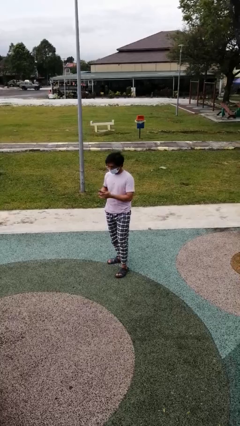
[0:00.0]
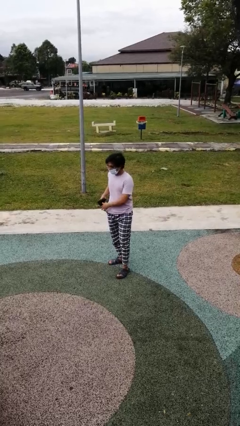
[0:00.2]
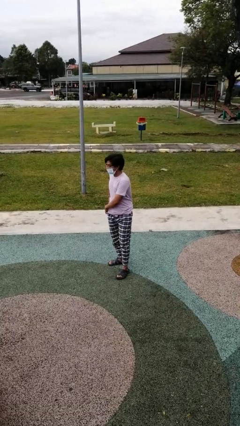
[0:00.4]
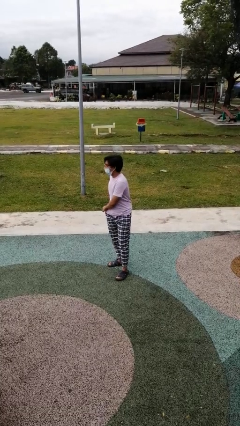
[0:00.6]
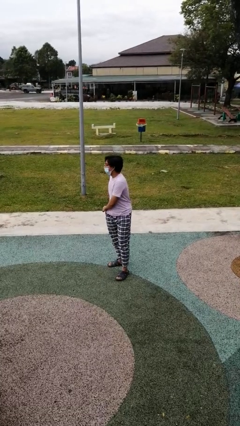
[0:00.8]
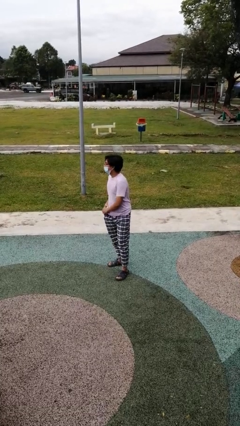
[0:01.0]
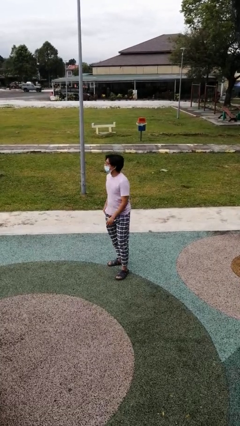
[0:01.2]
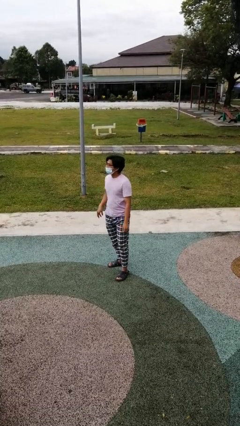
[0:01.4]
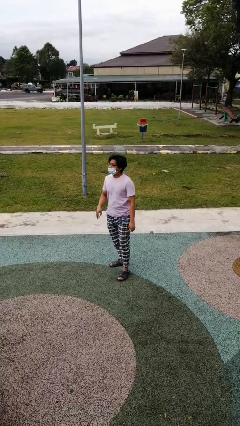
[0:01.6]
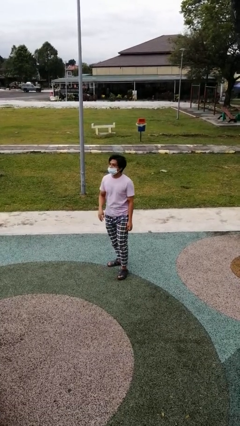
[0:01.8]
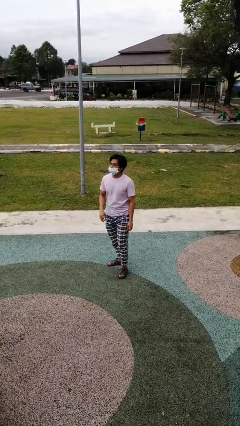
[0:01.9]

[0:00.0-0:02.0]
person puts phone into pocket

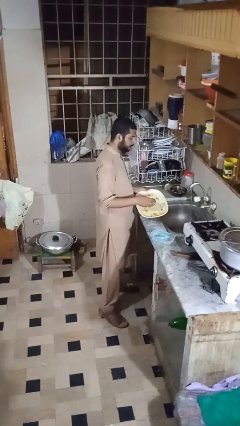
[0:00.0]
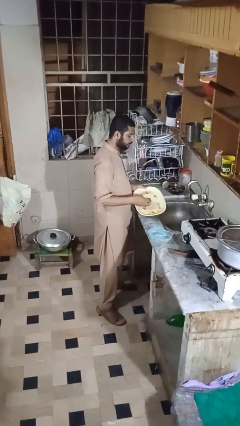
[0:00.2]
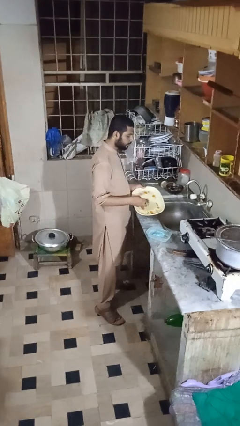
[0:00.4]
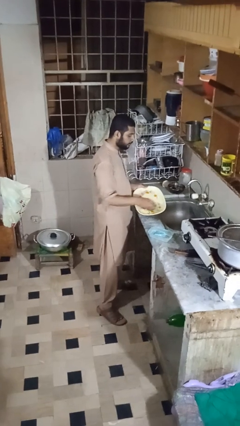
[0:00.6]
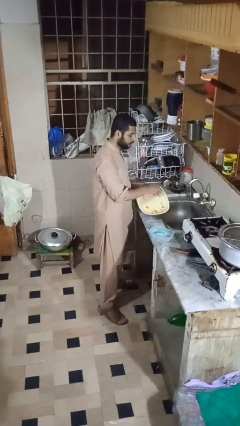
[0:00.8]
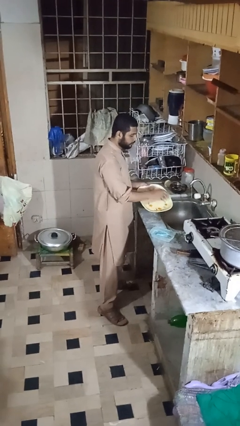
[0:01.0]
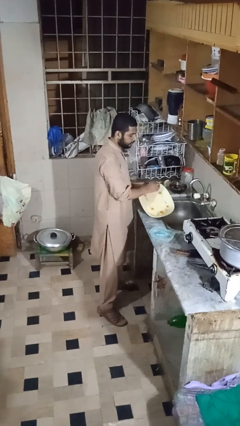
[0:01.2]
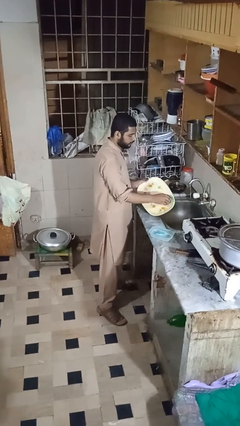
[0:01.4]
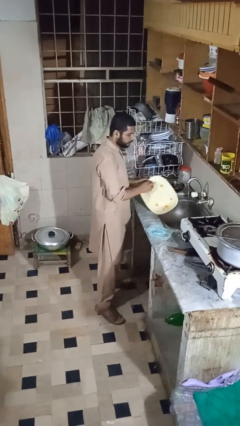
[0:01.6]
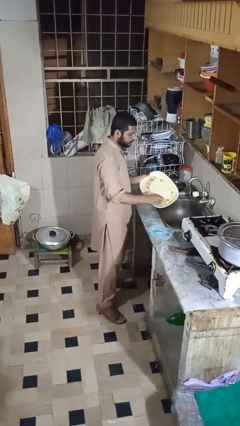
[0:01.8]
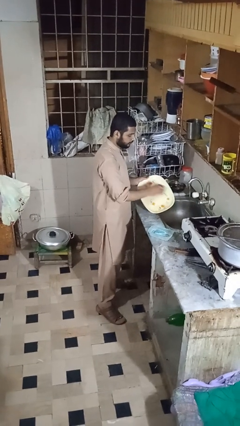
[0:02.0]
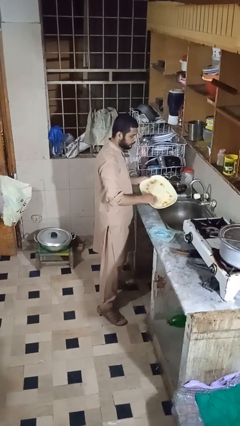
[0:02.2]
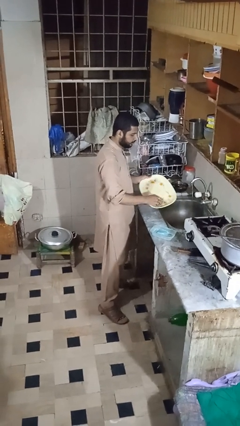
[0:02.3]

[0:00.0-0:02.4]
person washes dish

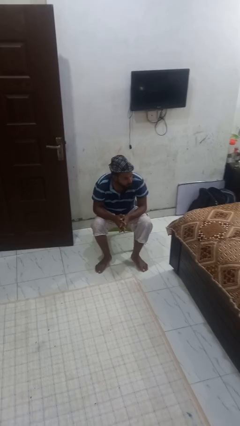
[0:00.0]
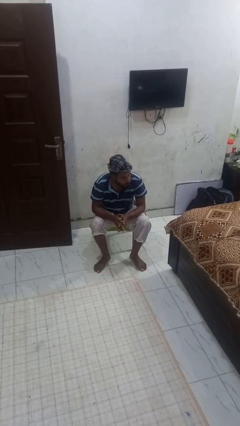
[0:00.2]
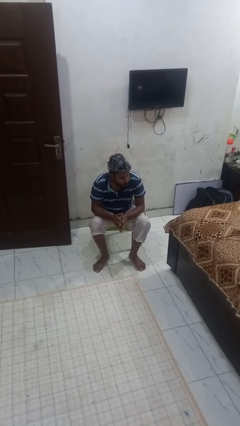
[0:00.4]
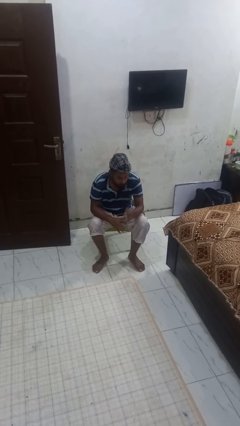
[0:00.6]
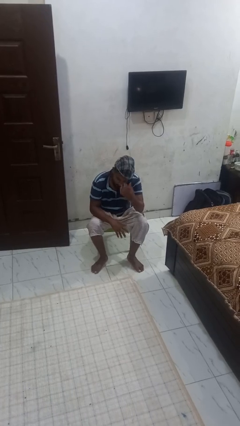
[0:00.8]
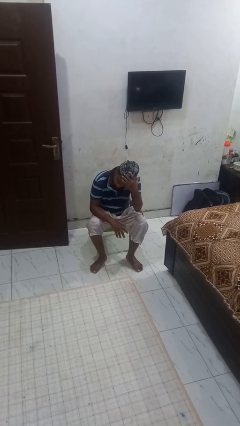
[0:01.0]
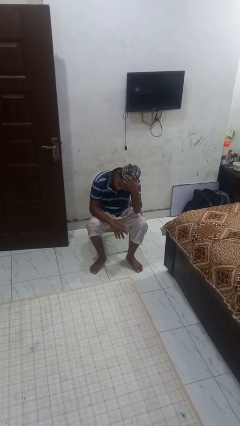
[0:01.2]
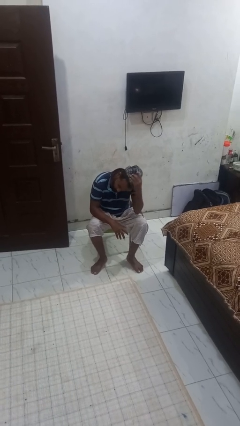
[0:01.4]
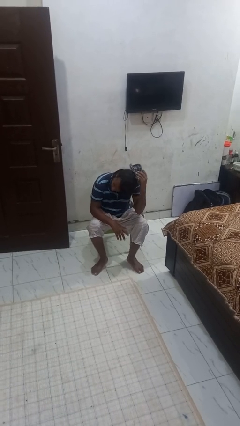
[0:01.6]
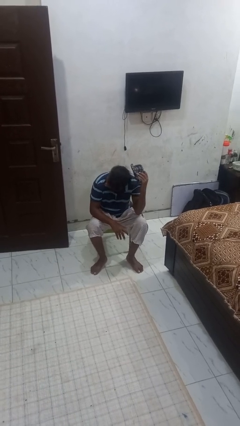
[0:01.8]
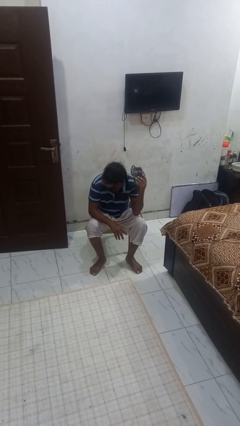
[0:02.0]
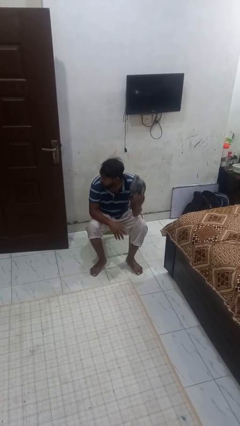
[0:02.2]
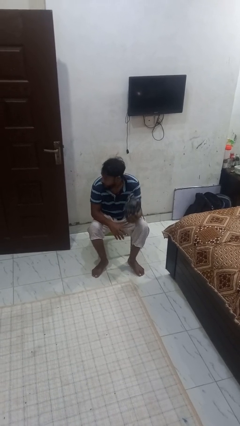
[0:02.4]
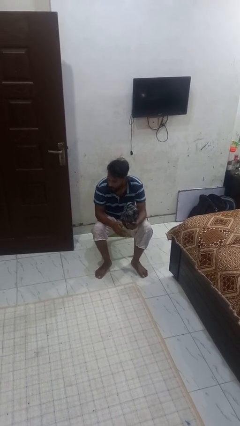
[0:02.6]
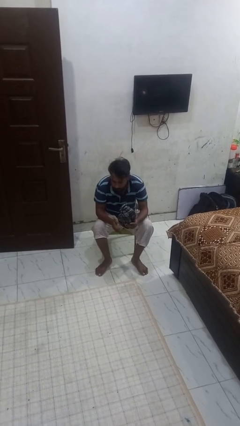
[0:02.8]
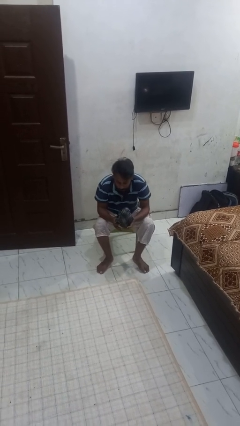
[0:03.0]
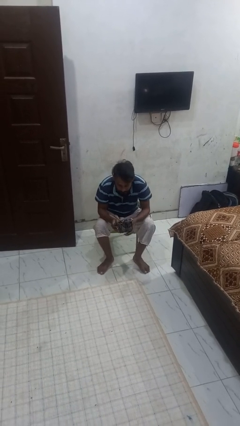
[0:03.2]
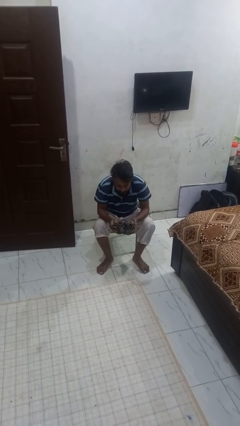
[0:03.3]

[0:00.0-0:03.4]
person takes off hat

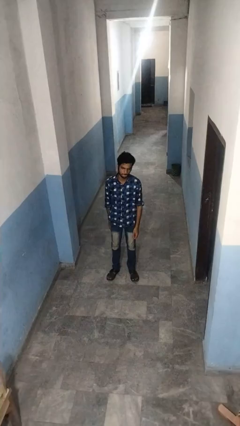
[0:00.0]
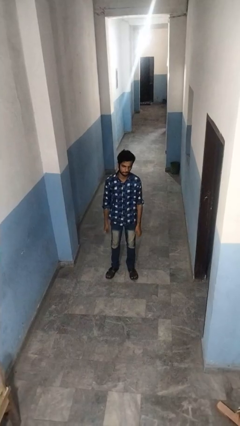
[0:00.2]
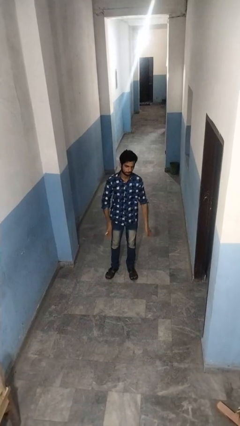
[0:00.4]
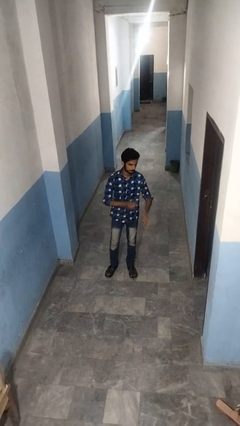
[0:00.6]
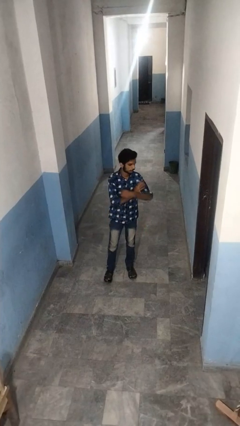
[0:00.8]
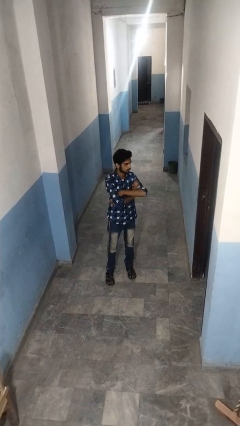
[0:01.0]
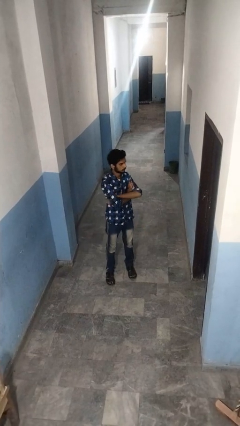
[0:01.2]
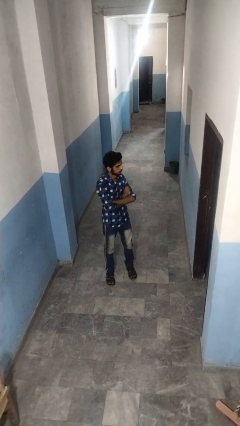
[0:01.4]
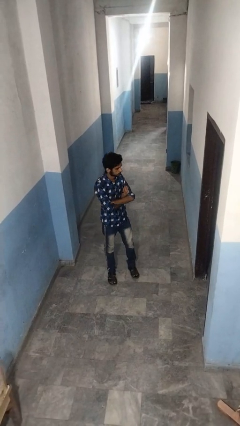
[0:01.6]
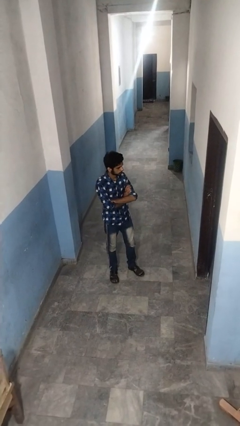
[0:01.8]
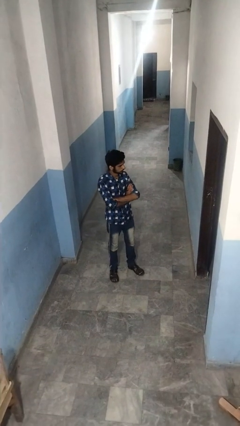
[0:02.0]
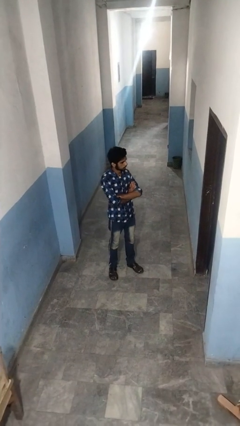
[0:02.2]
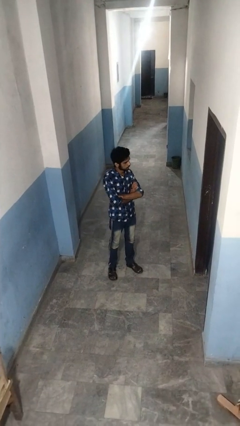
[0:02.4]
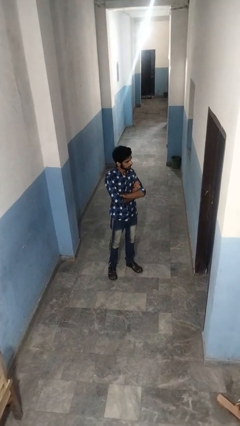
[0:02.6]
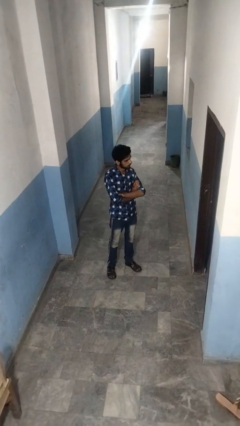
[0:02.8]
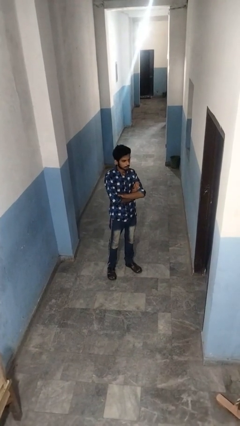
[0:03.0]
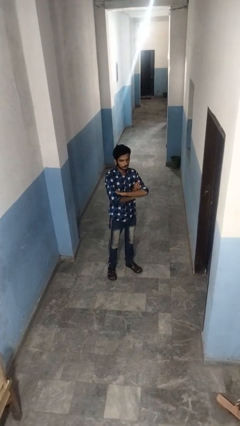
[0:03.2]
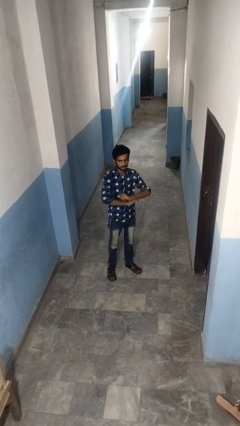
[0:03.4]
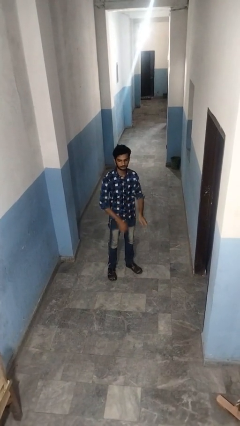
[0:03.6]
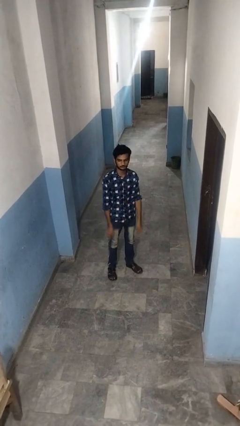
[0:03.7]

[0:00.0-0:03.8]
person crosses arms

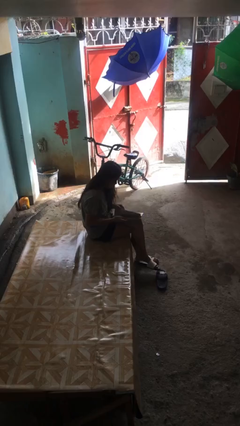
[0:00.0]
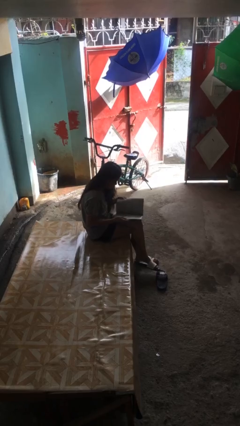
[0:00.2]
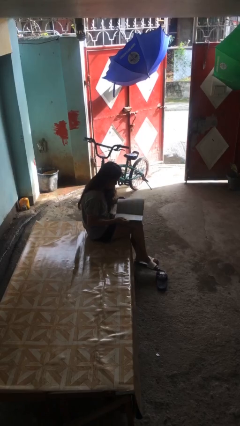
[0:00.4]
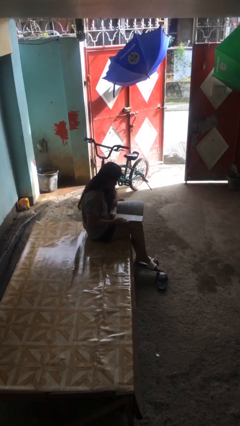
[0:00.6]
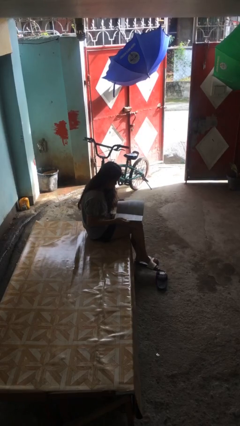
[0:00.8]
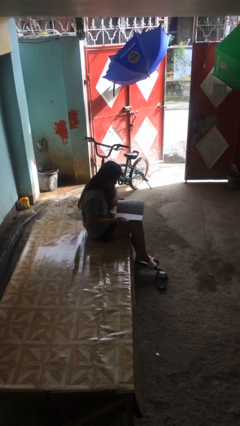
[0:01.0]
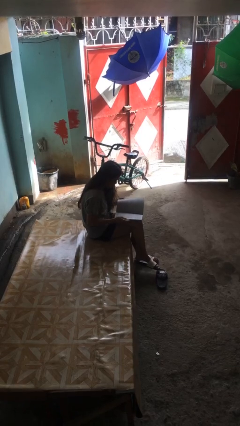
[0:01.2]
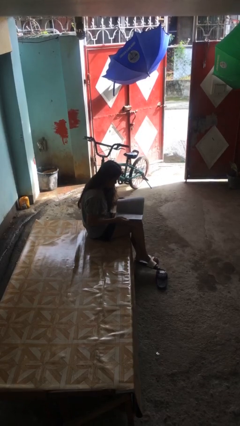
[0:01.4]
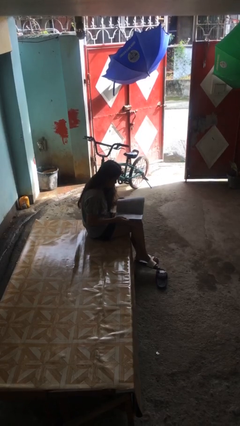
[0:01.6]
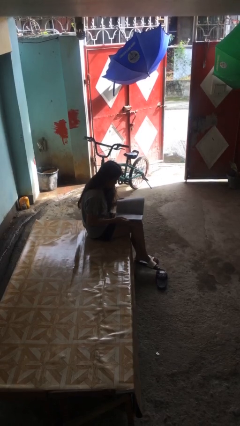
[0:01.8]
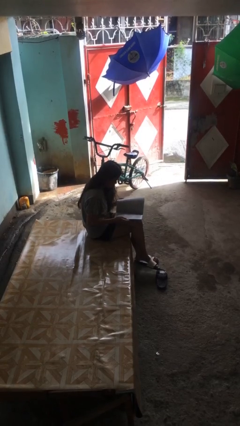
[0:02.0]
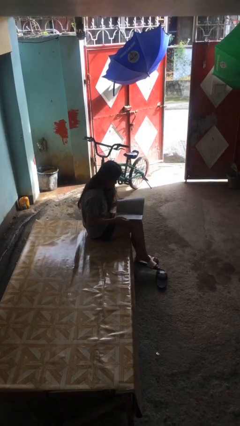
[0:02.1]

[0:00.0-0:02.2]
person reads document

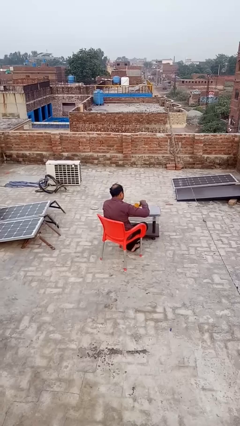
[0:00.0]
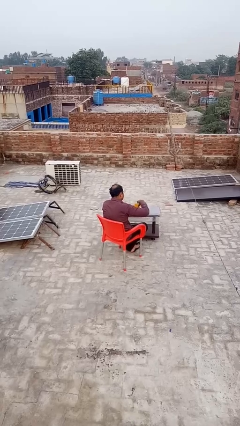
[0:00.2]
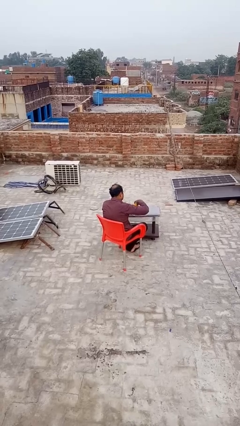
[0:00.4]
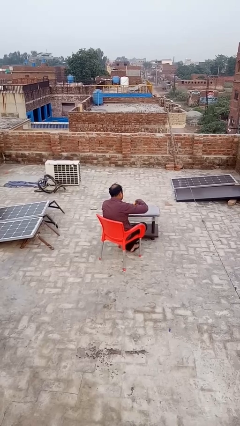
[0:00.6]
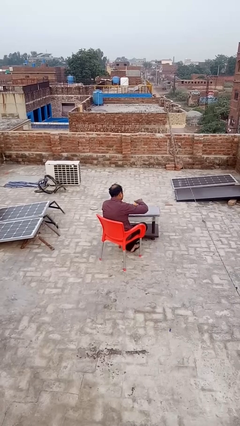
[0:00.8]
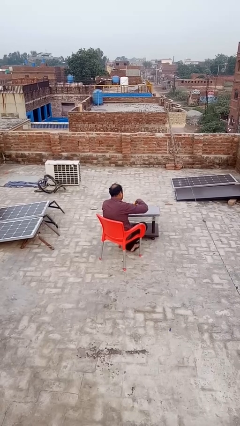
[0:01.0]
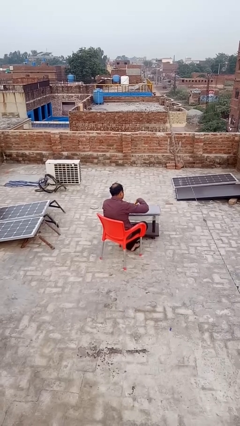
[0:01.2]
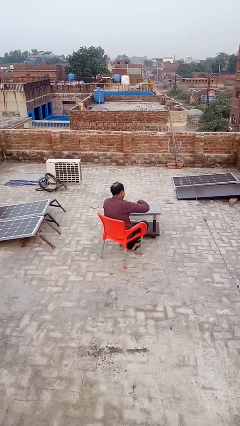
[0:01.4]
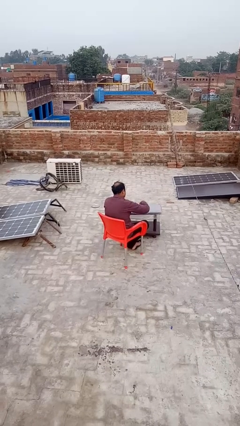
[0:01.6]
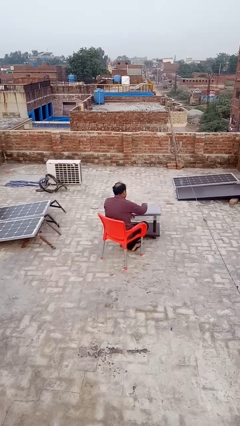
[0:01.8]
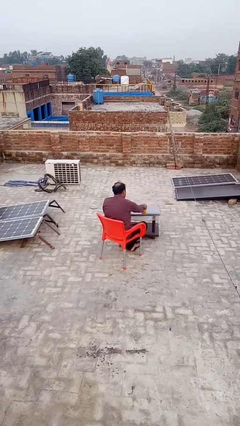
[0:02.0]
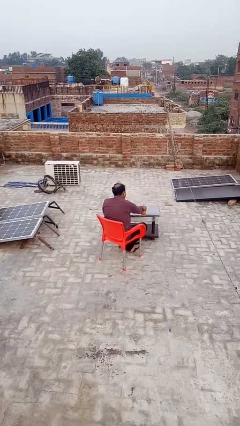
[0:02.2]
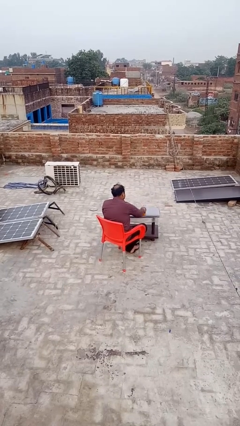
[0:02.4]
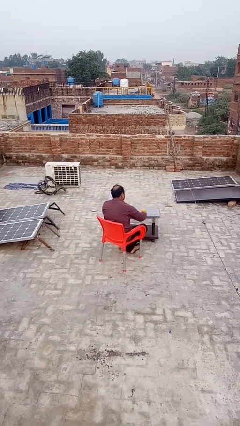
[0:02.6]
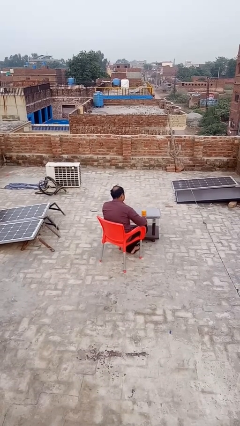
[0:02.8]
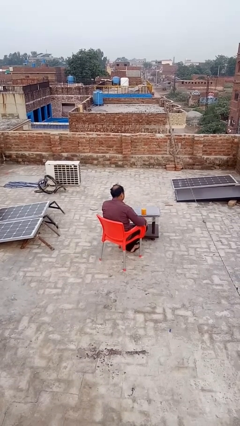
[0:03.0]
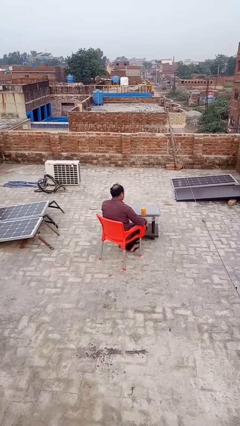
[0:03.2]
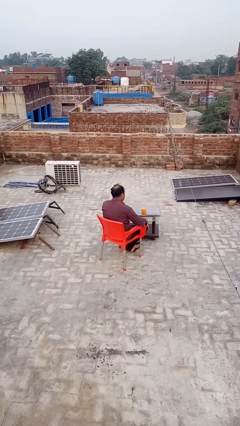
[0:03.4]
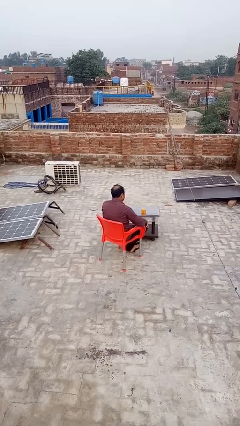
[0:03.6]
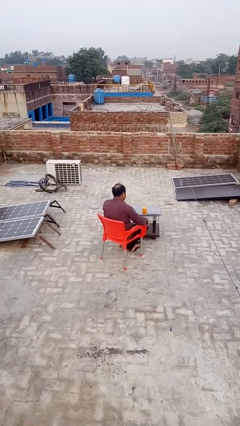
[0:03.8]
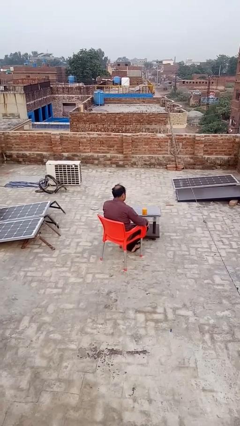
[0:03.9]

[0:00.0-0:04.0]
person closes jar
